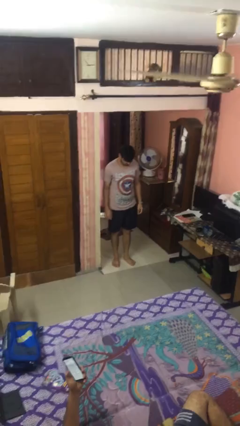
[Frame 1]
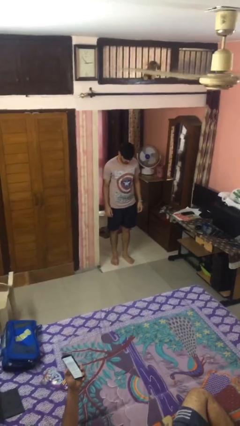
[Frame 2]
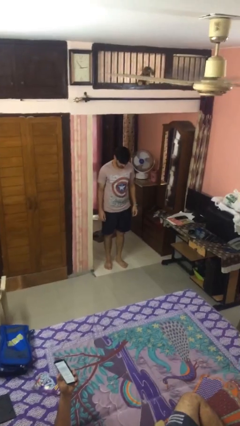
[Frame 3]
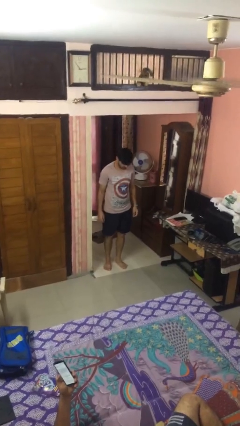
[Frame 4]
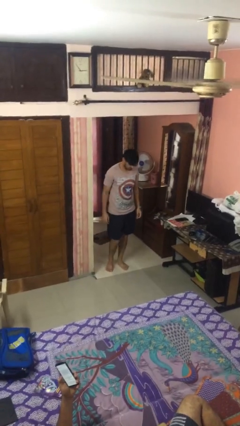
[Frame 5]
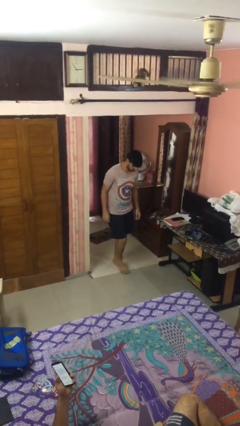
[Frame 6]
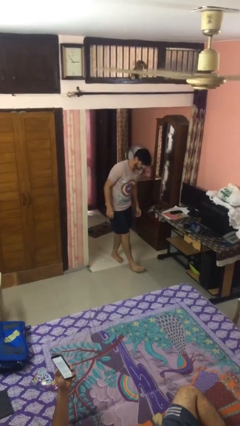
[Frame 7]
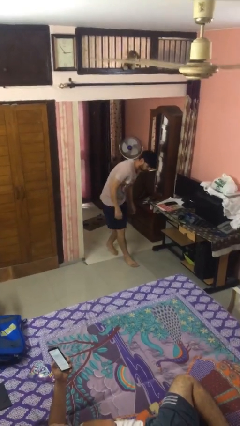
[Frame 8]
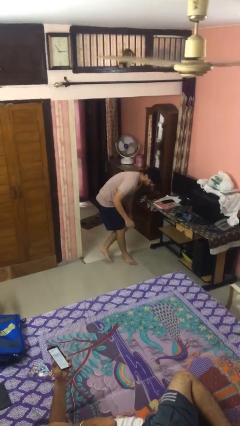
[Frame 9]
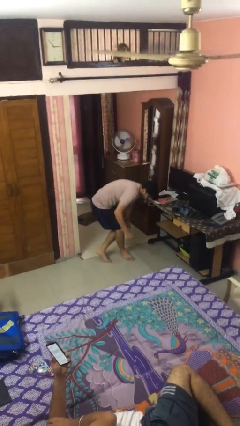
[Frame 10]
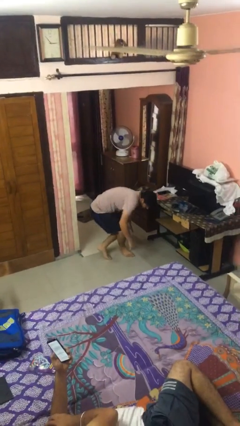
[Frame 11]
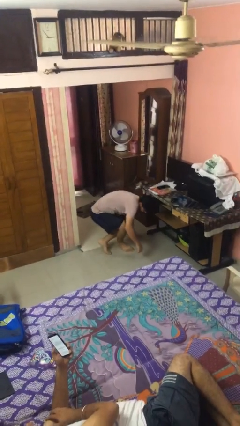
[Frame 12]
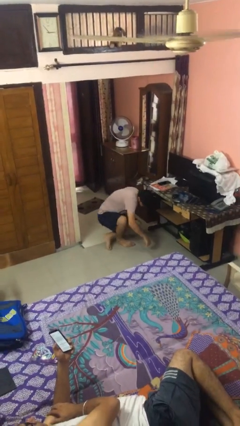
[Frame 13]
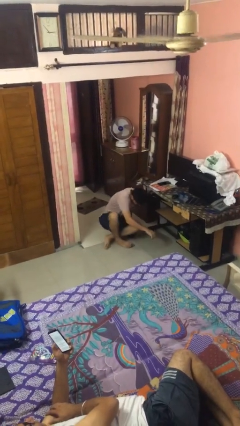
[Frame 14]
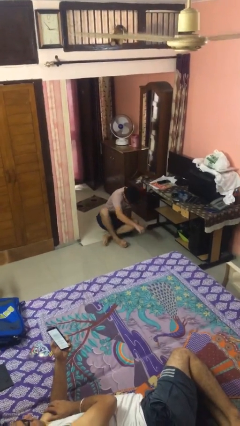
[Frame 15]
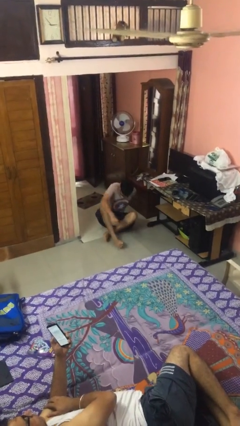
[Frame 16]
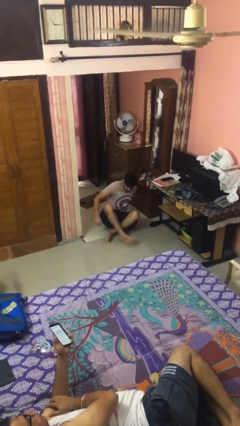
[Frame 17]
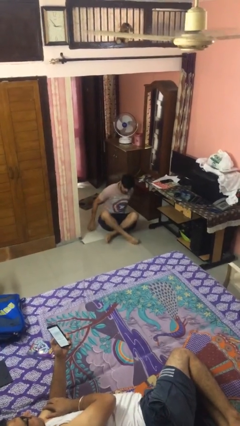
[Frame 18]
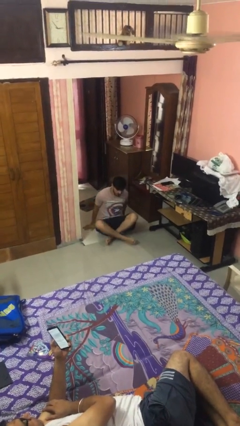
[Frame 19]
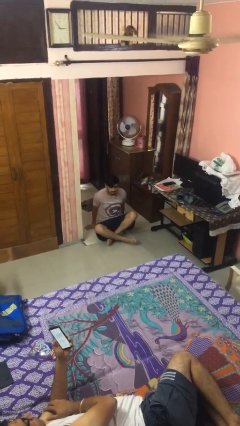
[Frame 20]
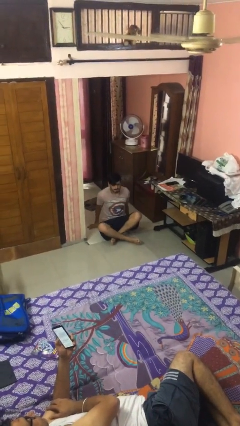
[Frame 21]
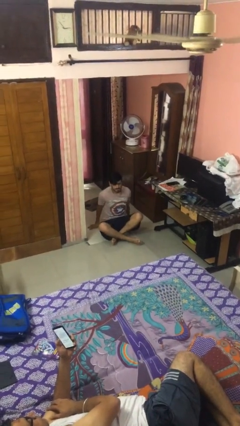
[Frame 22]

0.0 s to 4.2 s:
person sits crisscross

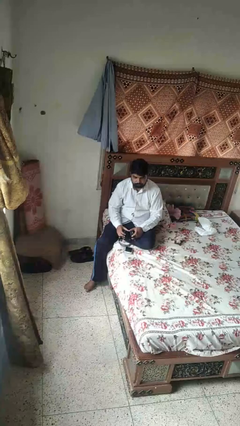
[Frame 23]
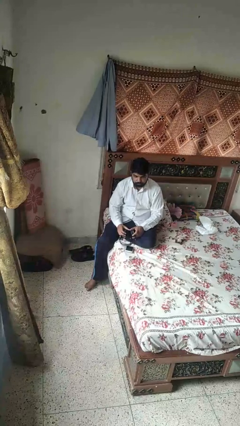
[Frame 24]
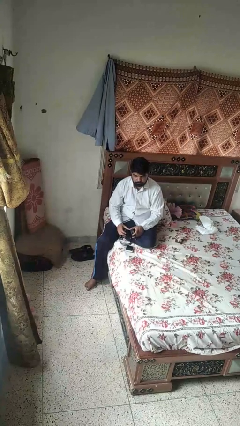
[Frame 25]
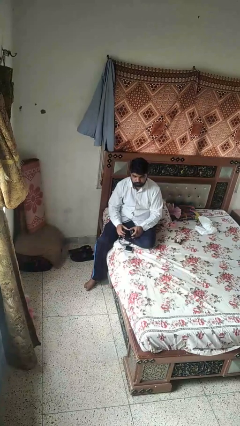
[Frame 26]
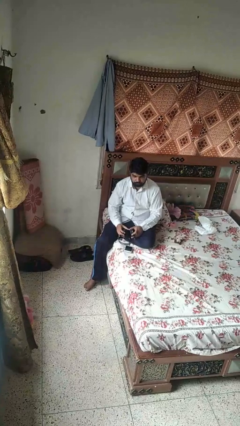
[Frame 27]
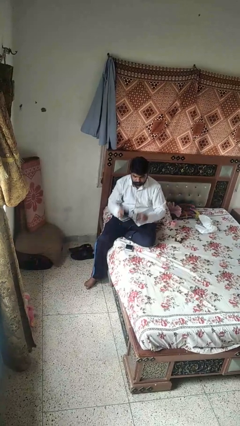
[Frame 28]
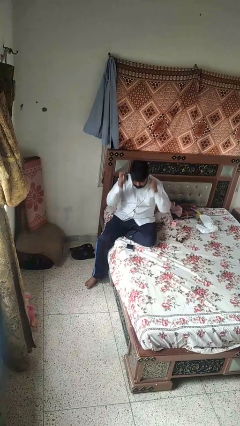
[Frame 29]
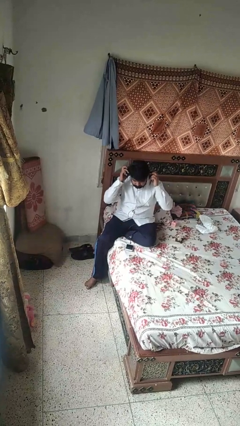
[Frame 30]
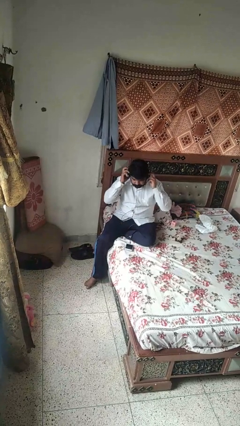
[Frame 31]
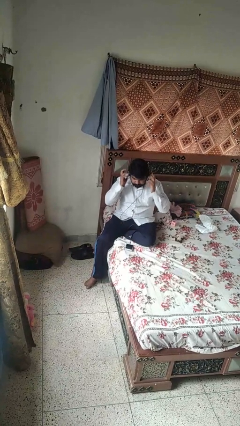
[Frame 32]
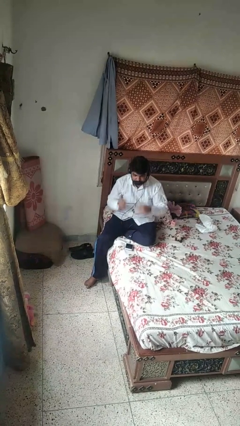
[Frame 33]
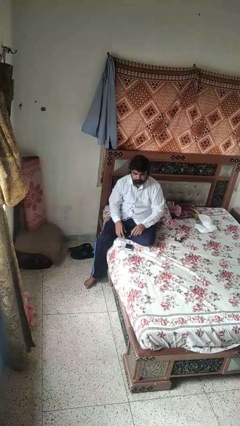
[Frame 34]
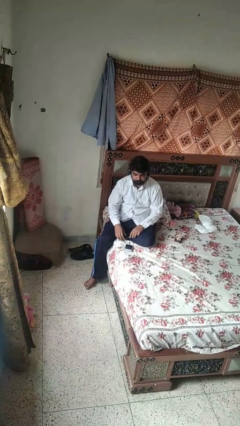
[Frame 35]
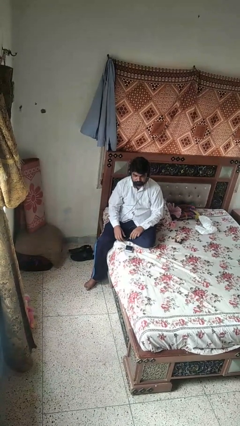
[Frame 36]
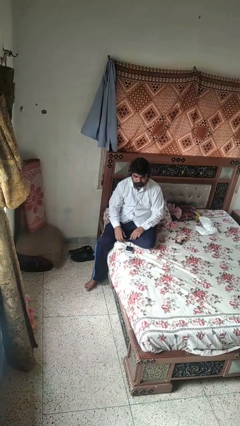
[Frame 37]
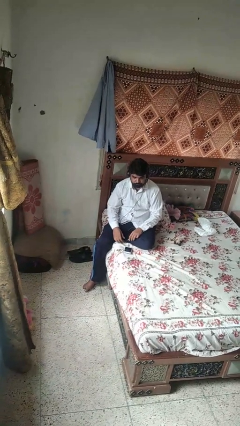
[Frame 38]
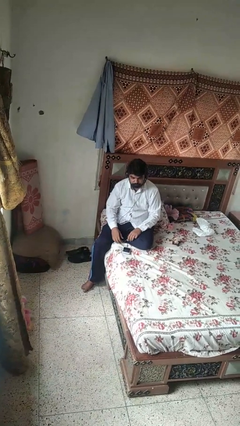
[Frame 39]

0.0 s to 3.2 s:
person puts on headphones

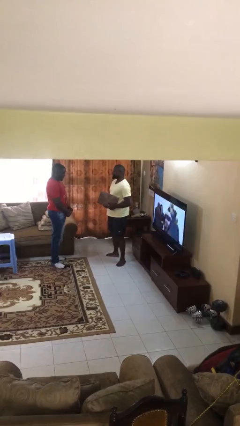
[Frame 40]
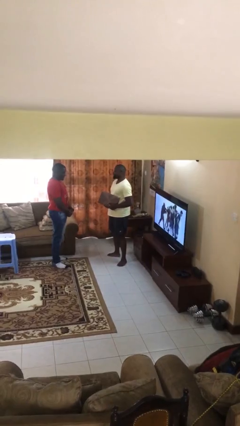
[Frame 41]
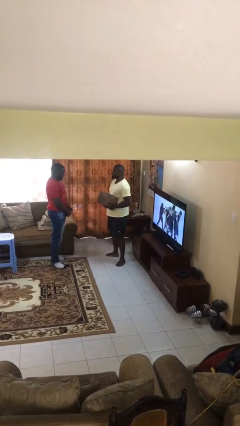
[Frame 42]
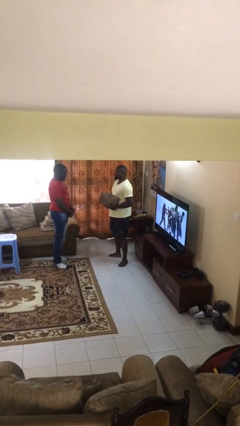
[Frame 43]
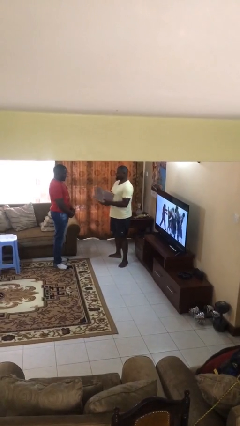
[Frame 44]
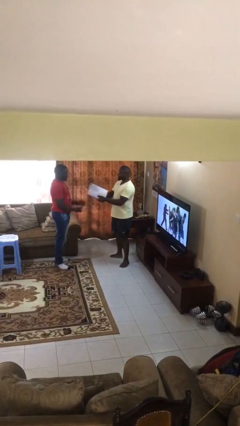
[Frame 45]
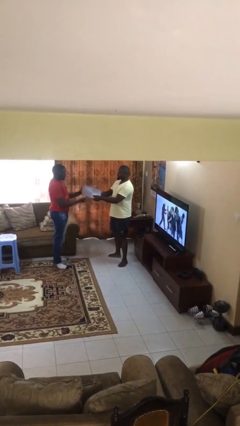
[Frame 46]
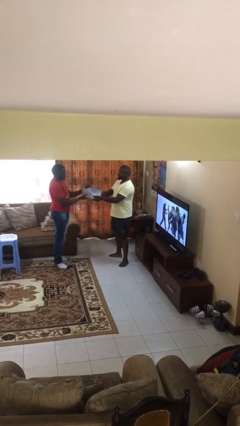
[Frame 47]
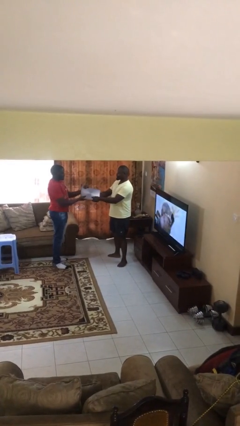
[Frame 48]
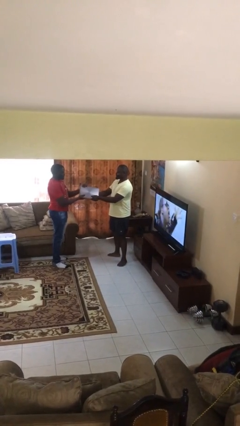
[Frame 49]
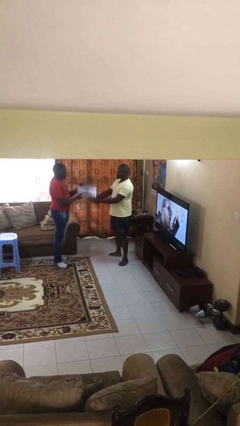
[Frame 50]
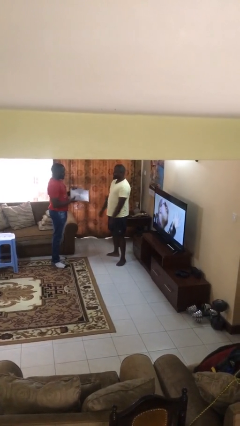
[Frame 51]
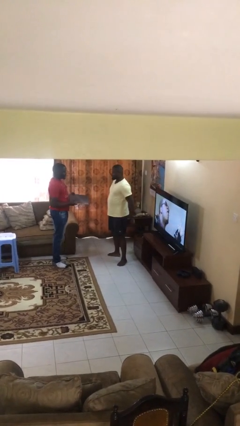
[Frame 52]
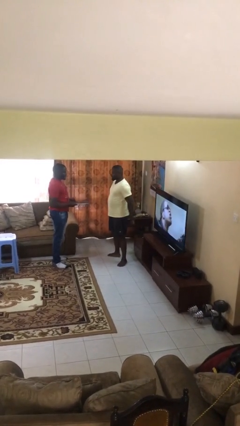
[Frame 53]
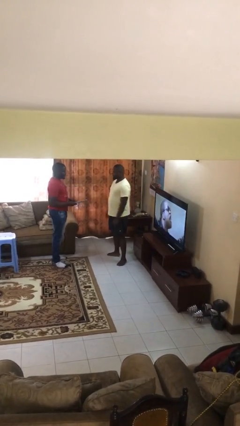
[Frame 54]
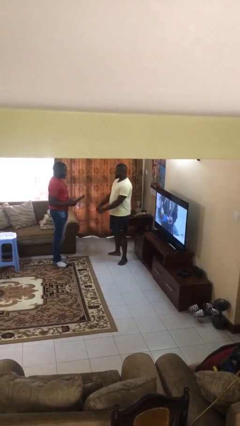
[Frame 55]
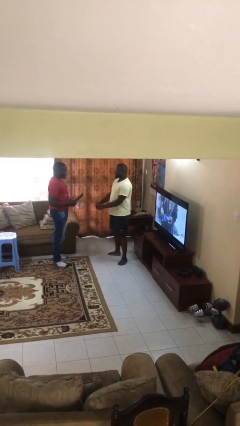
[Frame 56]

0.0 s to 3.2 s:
person transfers object to person

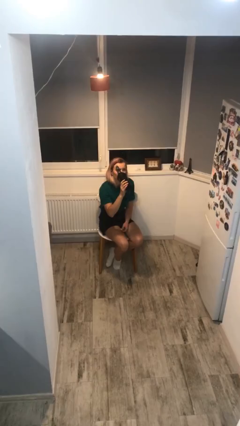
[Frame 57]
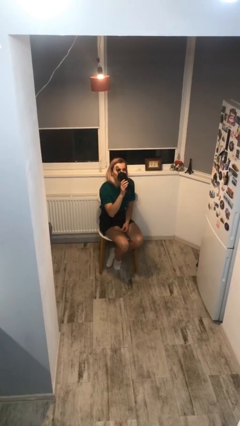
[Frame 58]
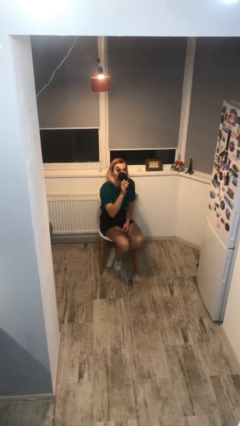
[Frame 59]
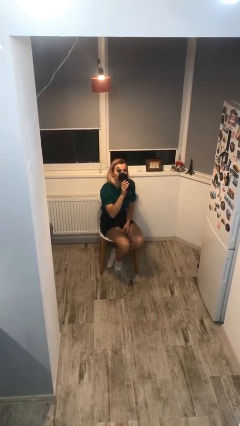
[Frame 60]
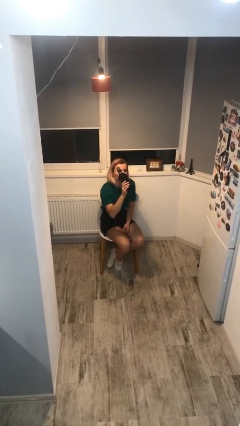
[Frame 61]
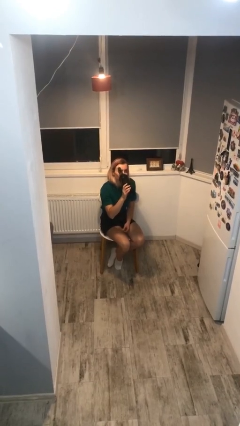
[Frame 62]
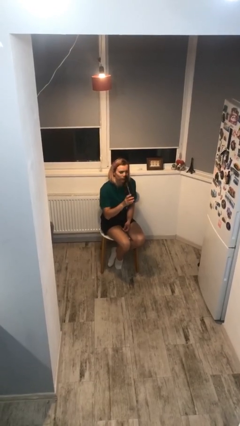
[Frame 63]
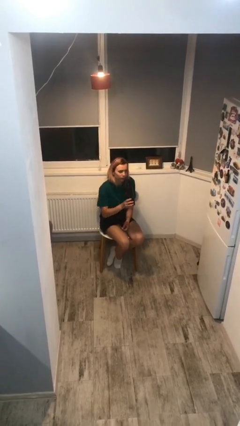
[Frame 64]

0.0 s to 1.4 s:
person drinks from bottle

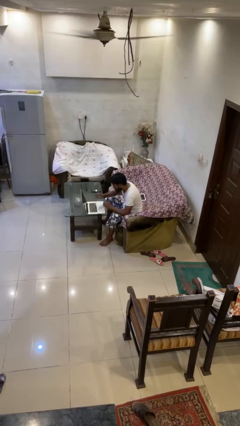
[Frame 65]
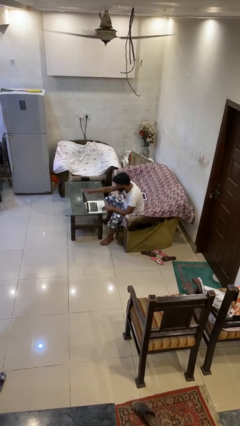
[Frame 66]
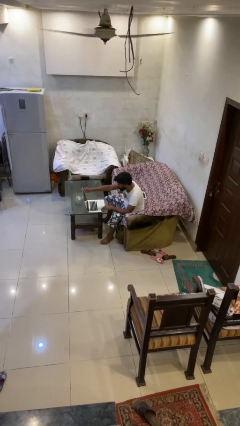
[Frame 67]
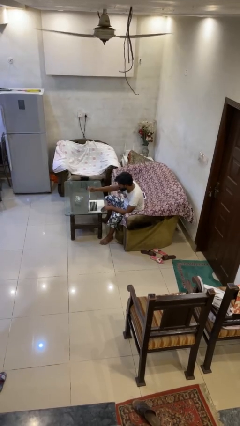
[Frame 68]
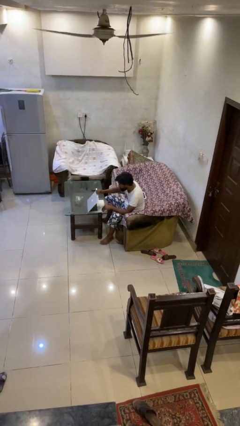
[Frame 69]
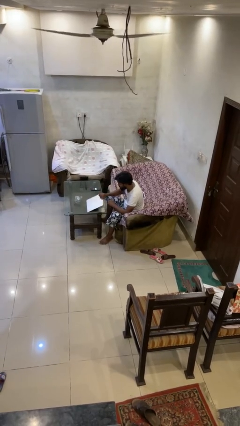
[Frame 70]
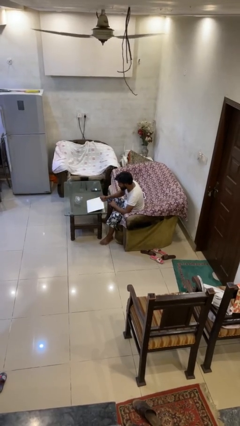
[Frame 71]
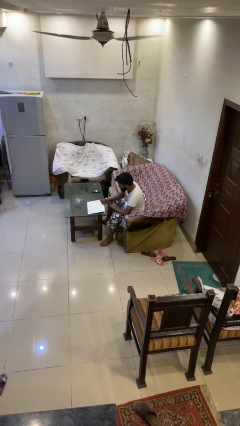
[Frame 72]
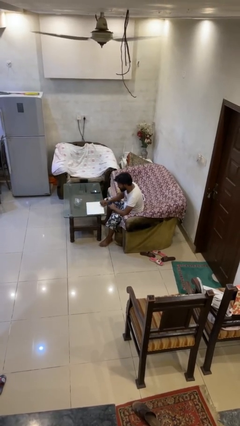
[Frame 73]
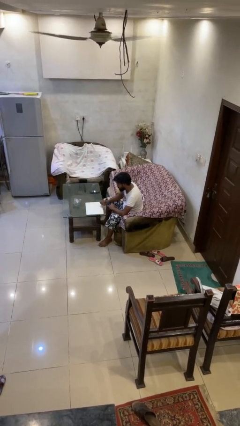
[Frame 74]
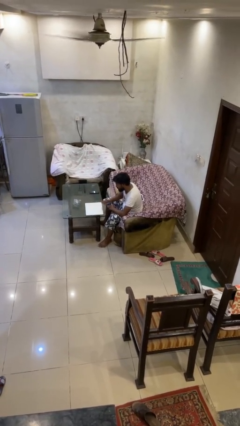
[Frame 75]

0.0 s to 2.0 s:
person closes laptop

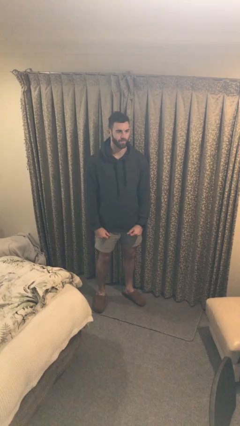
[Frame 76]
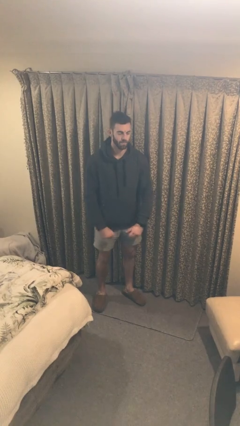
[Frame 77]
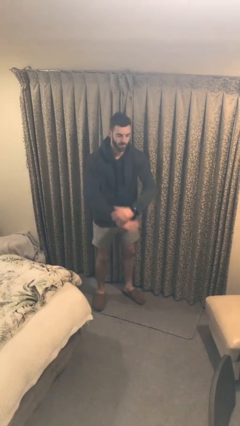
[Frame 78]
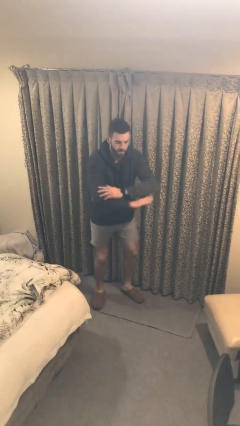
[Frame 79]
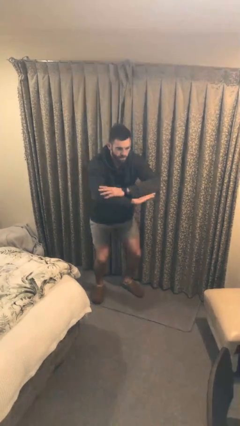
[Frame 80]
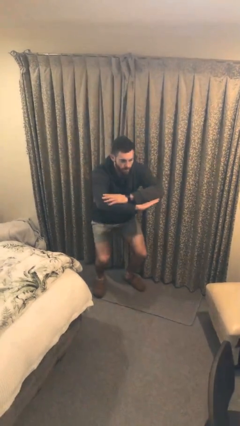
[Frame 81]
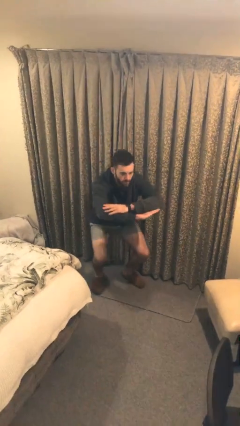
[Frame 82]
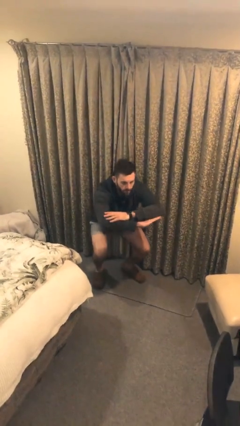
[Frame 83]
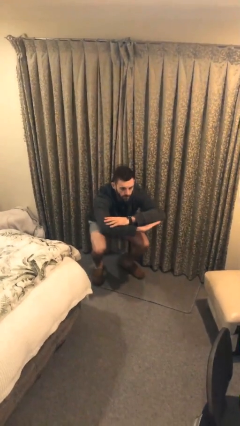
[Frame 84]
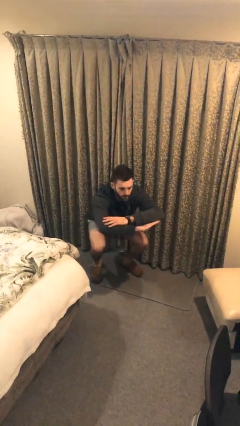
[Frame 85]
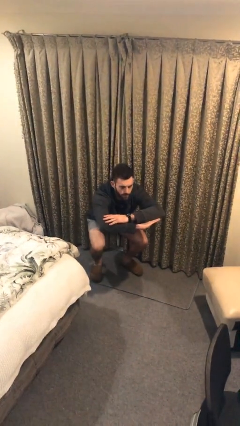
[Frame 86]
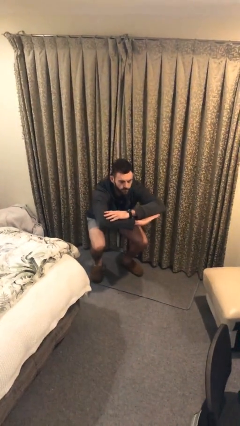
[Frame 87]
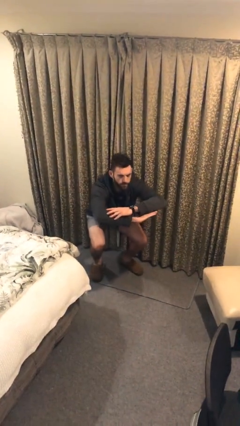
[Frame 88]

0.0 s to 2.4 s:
person squats

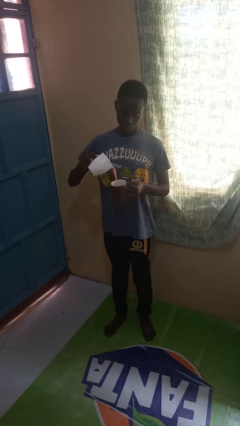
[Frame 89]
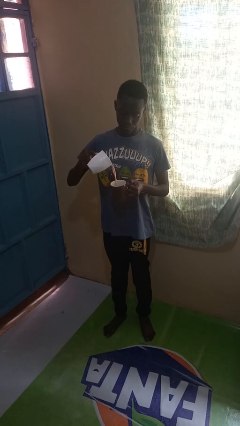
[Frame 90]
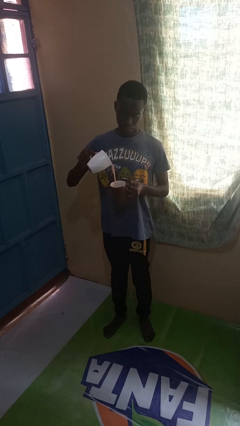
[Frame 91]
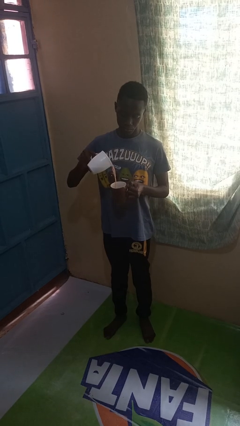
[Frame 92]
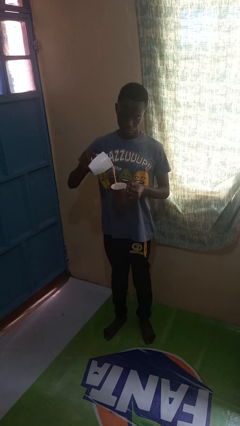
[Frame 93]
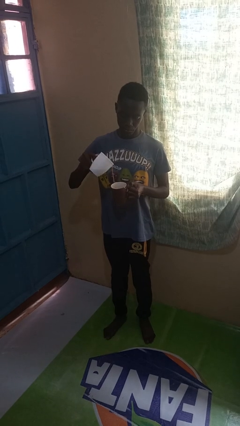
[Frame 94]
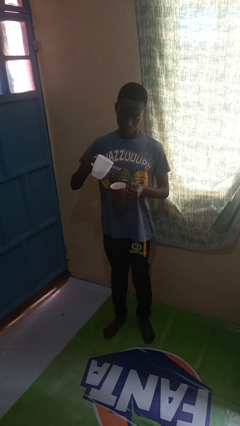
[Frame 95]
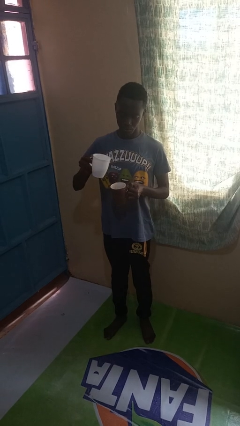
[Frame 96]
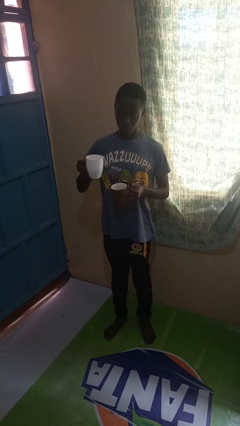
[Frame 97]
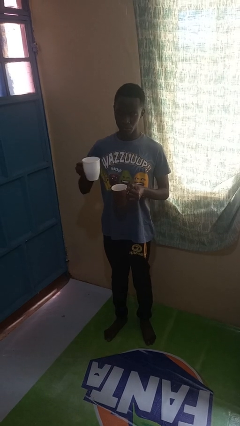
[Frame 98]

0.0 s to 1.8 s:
person pours coffee into mug
